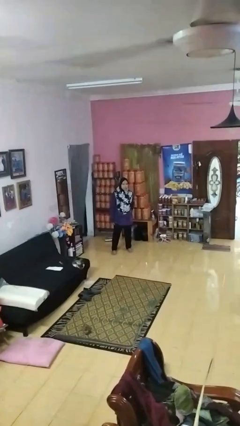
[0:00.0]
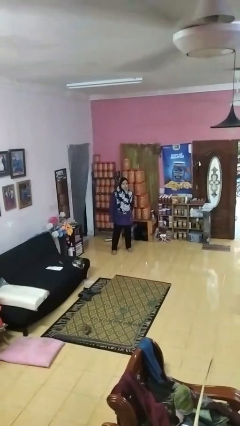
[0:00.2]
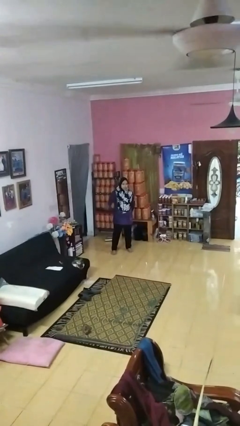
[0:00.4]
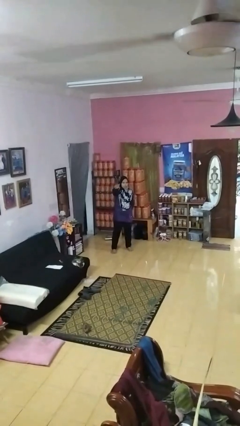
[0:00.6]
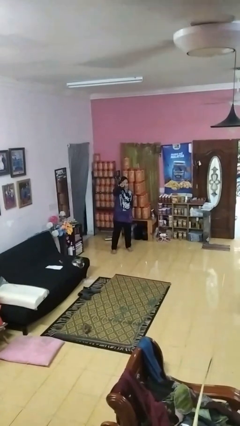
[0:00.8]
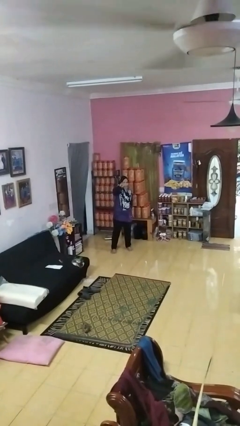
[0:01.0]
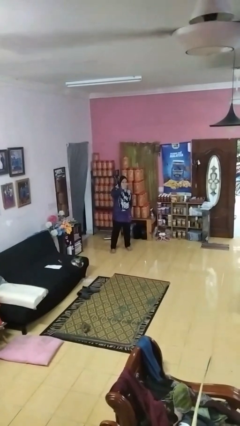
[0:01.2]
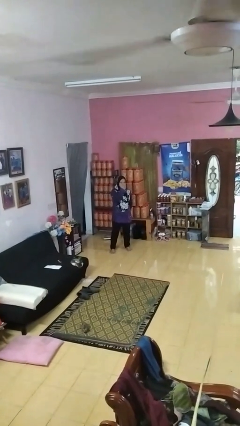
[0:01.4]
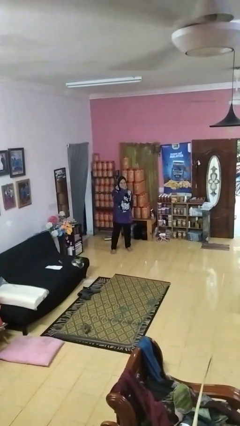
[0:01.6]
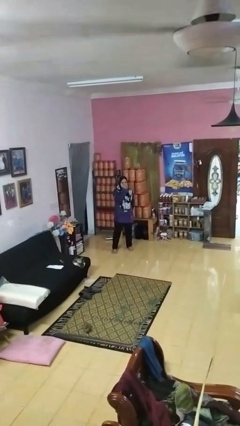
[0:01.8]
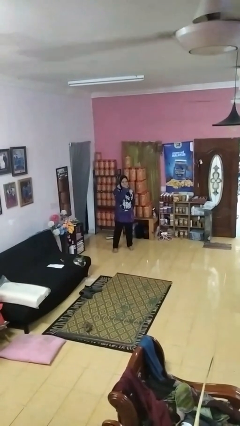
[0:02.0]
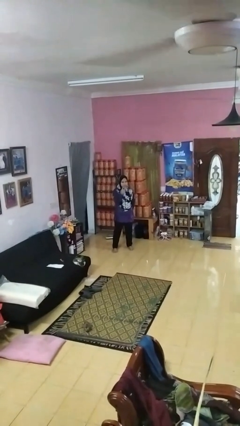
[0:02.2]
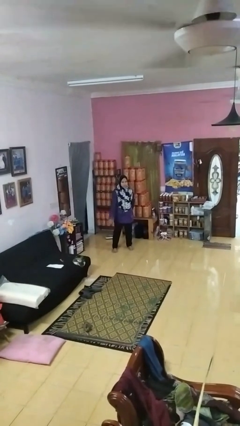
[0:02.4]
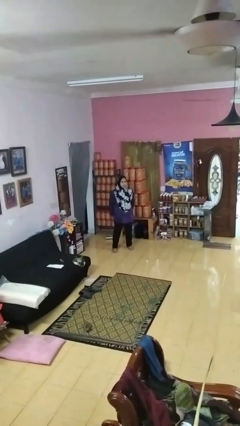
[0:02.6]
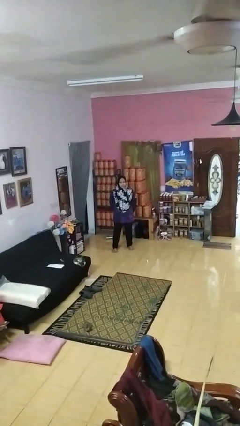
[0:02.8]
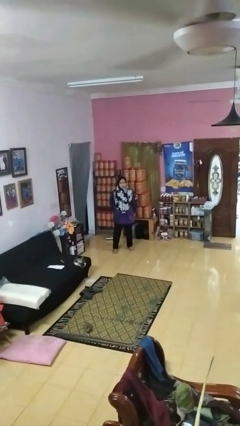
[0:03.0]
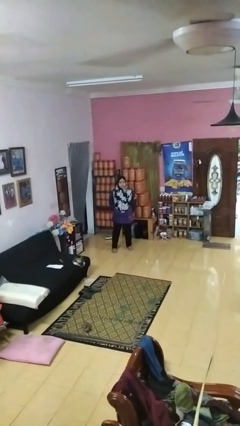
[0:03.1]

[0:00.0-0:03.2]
person gestures watch closely

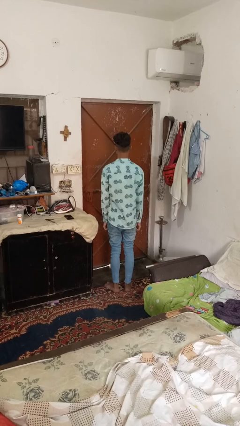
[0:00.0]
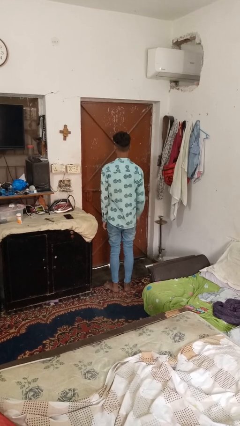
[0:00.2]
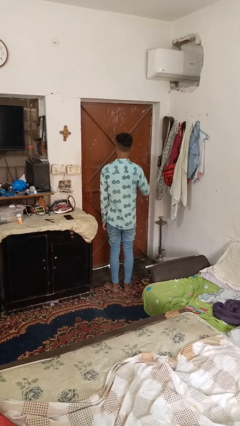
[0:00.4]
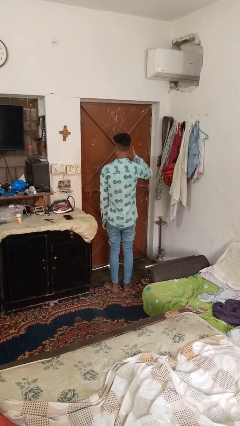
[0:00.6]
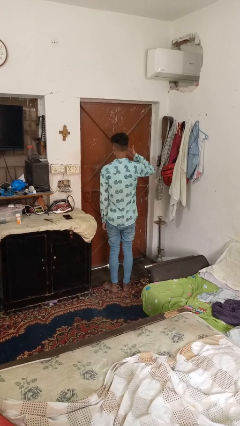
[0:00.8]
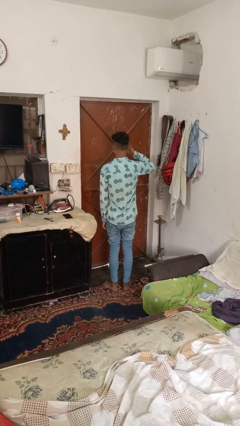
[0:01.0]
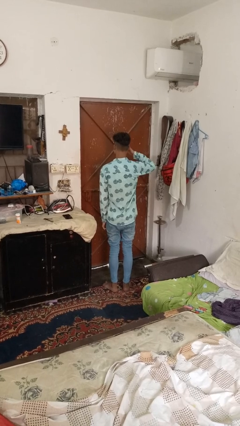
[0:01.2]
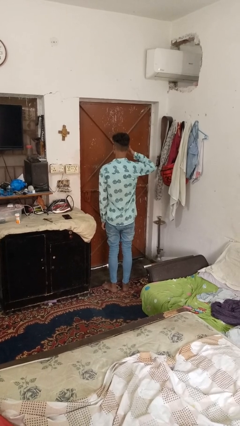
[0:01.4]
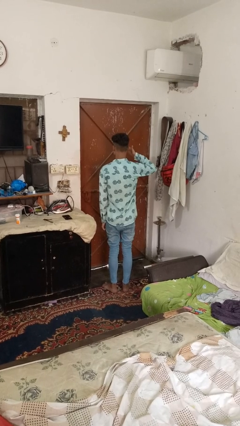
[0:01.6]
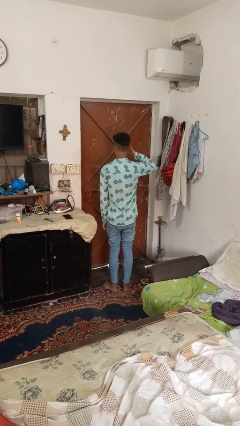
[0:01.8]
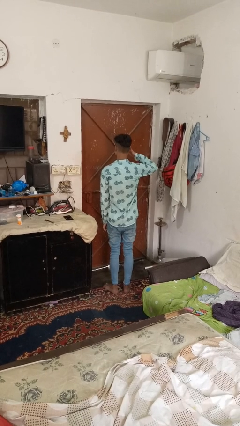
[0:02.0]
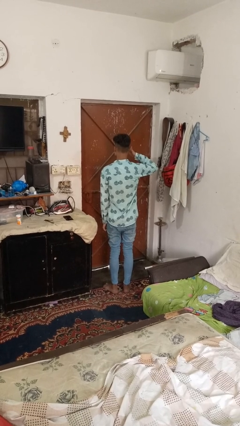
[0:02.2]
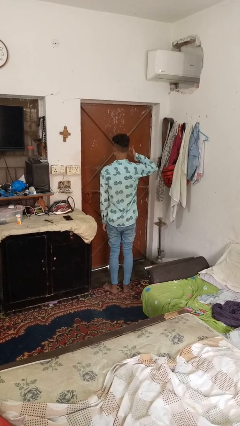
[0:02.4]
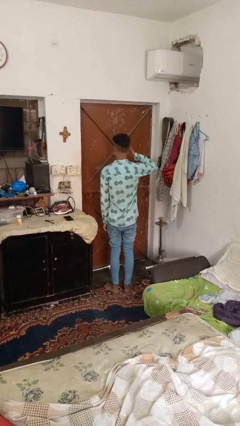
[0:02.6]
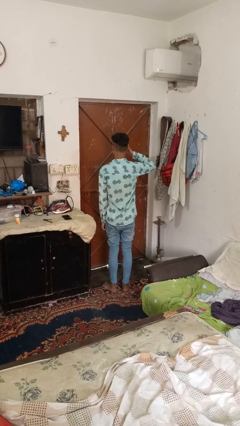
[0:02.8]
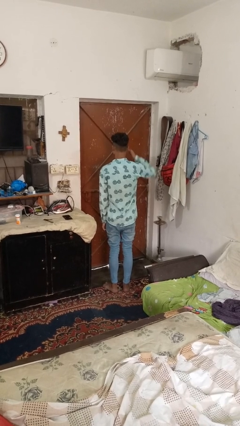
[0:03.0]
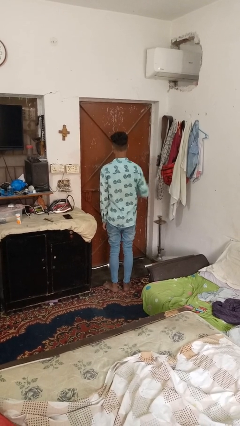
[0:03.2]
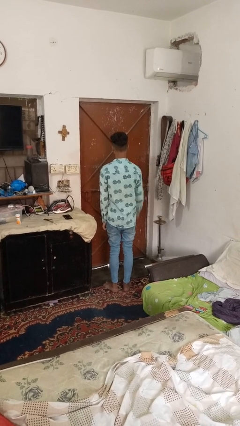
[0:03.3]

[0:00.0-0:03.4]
person rubs eyes

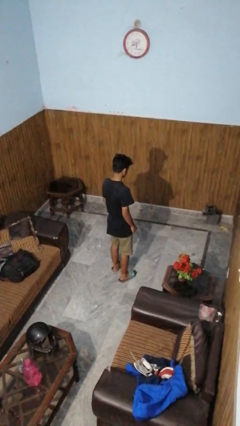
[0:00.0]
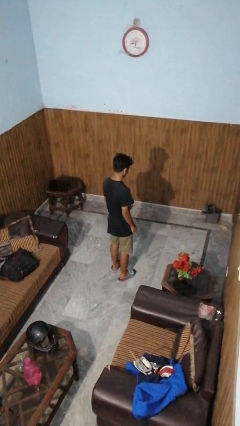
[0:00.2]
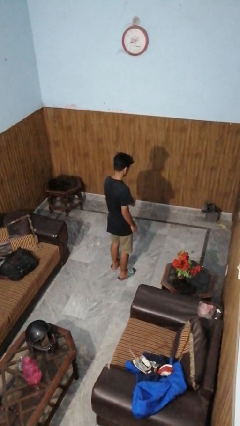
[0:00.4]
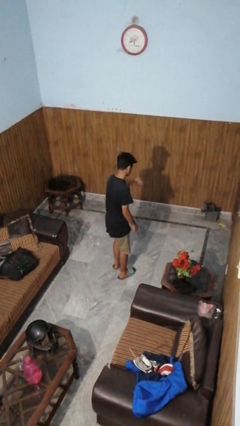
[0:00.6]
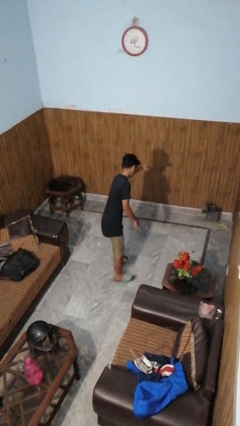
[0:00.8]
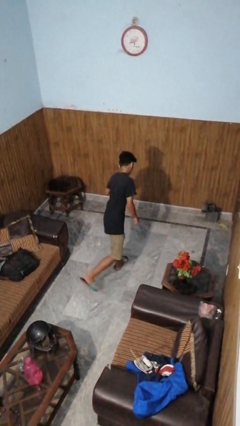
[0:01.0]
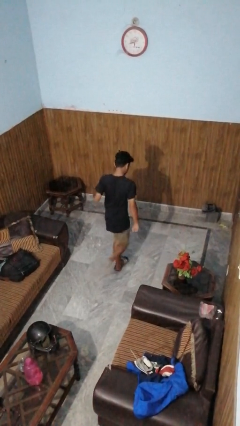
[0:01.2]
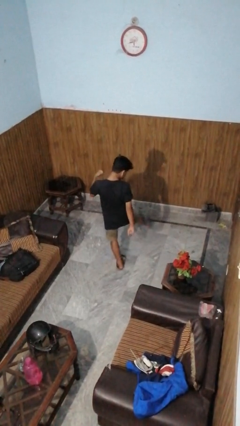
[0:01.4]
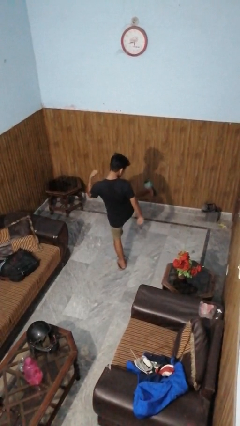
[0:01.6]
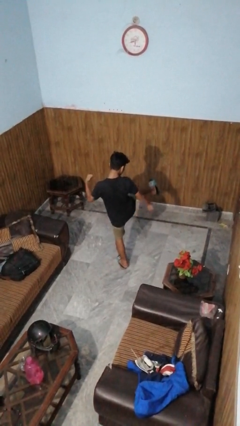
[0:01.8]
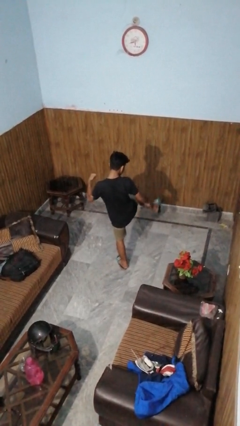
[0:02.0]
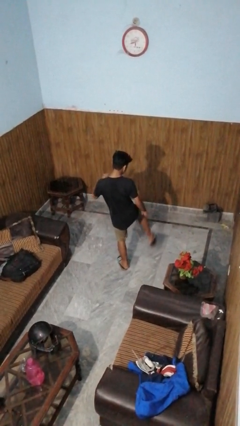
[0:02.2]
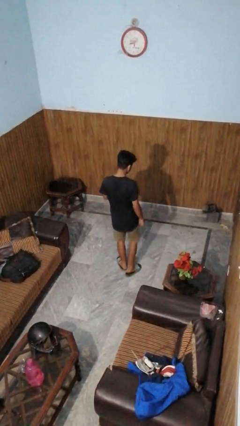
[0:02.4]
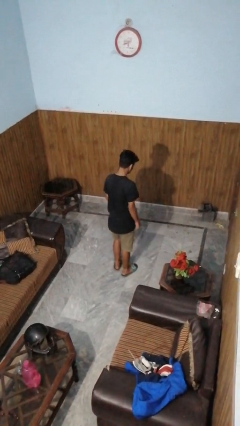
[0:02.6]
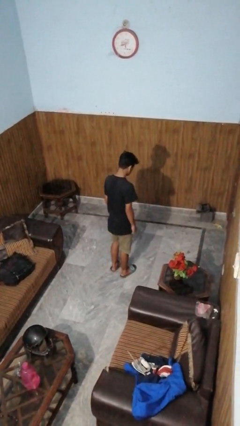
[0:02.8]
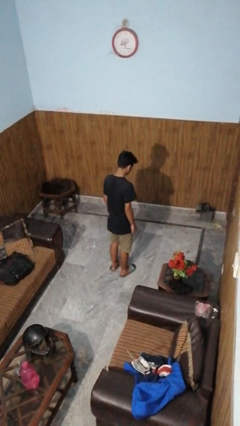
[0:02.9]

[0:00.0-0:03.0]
person karate kicks

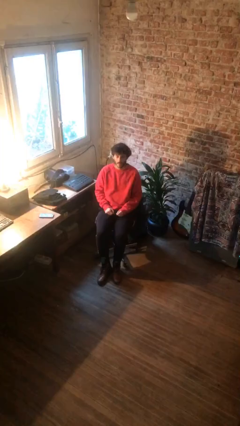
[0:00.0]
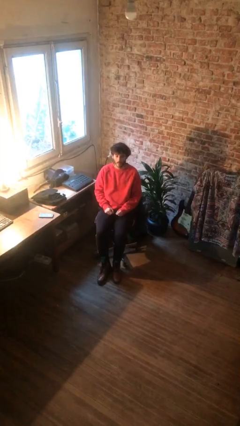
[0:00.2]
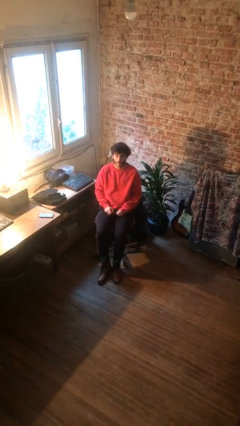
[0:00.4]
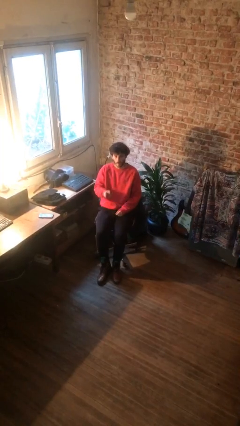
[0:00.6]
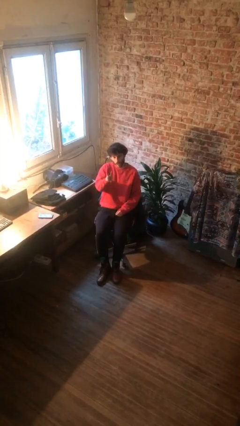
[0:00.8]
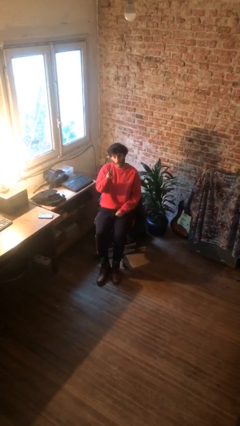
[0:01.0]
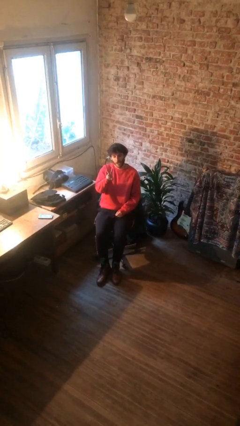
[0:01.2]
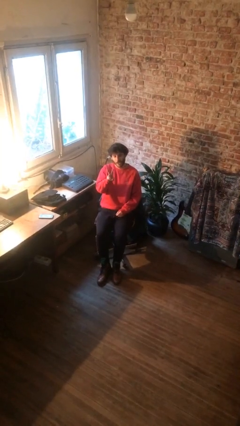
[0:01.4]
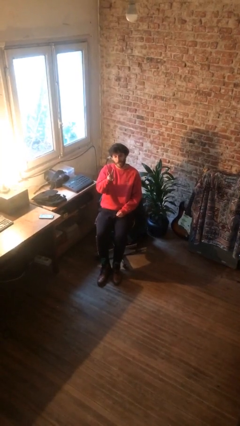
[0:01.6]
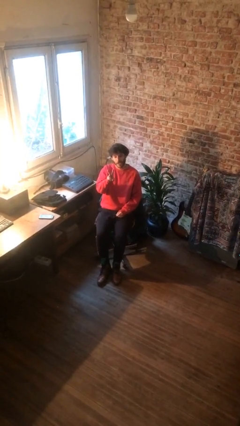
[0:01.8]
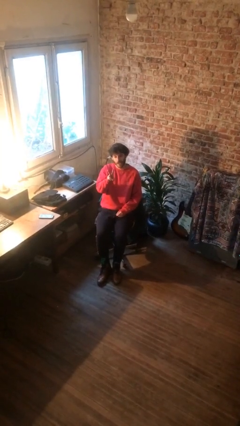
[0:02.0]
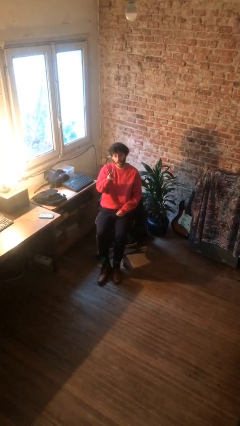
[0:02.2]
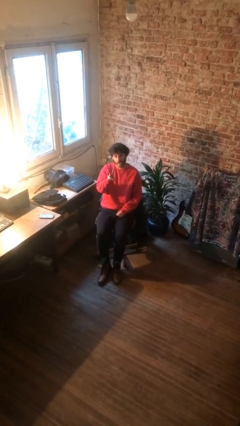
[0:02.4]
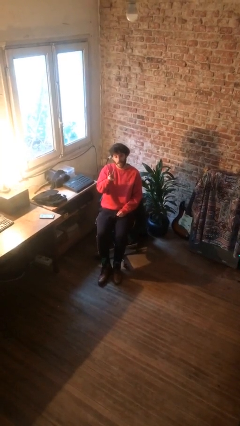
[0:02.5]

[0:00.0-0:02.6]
person gestures peace

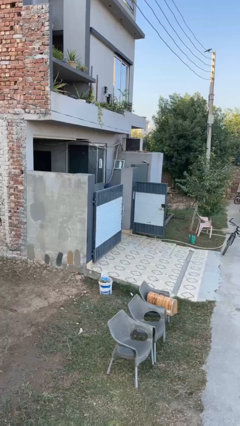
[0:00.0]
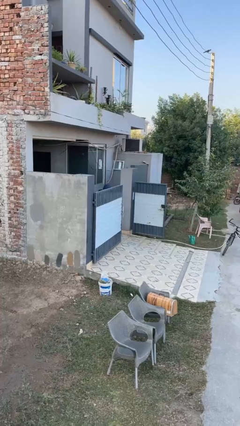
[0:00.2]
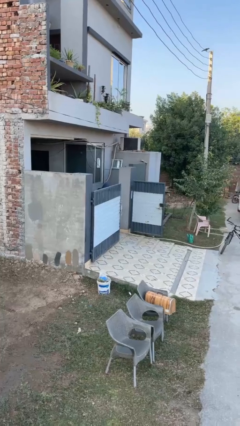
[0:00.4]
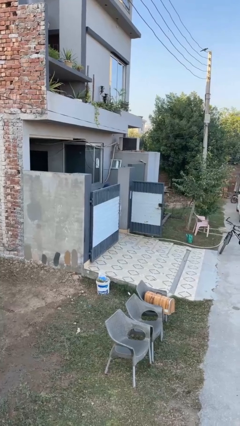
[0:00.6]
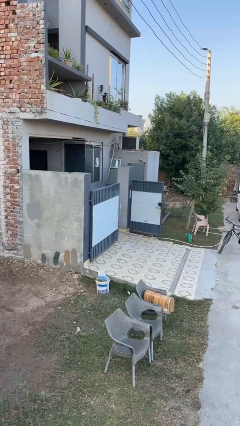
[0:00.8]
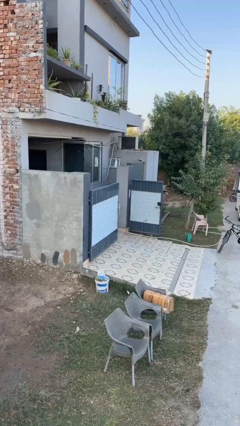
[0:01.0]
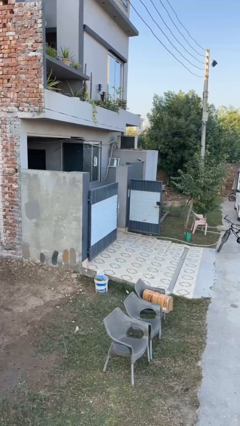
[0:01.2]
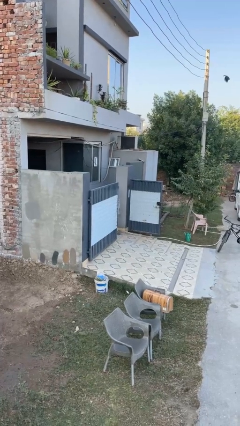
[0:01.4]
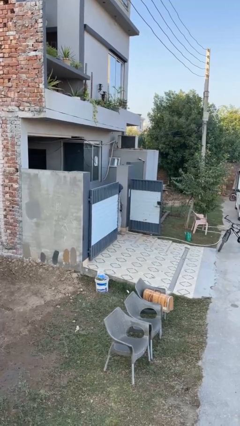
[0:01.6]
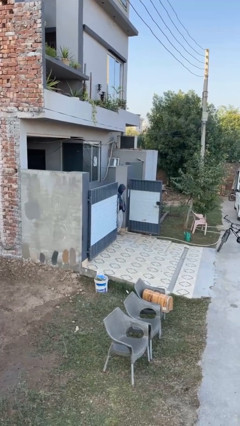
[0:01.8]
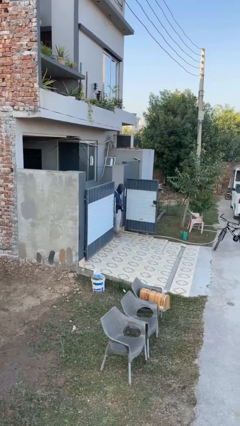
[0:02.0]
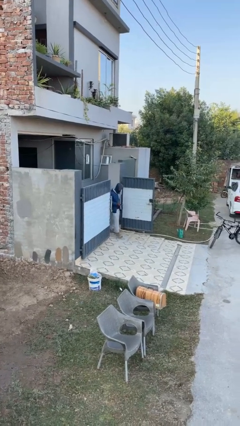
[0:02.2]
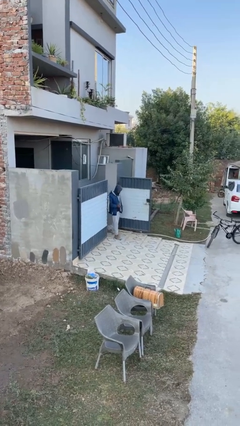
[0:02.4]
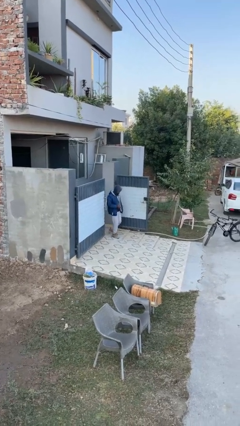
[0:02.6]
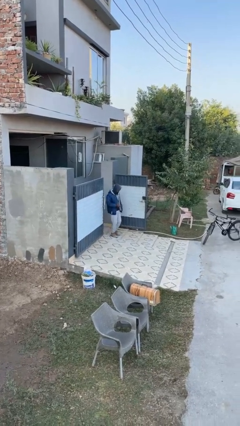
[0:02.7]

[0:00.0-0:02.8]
person enters scene through structure

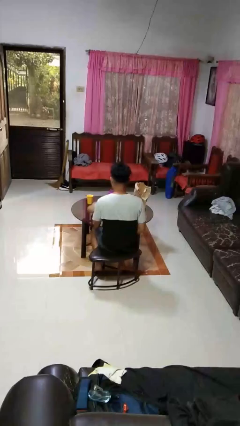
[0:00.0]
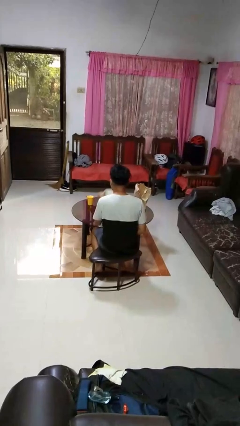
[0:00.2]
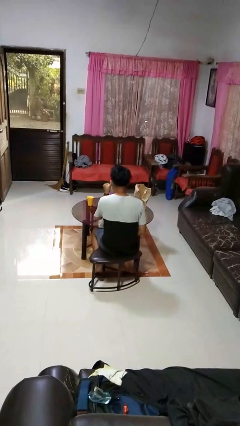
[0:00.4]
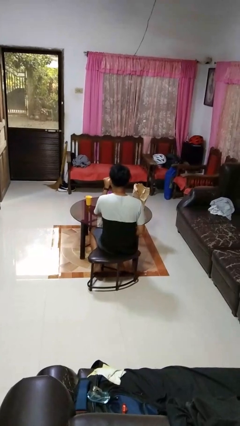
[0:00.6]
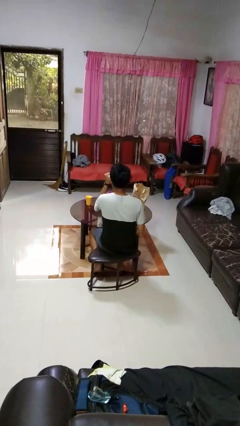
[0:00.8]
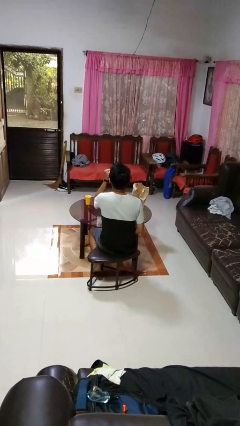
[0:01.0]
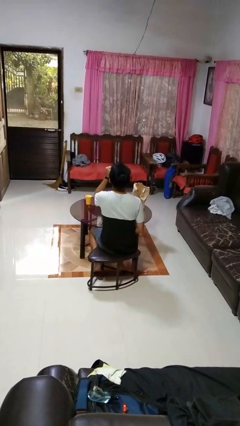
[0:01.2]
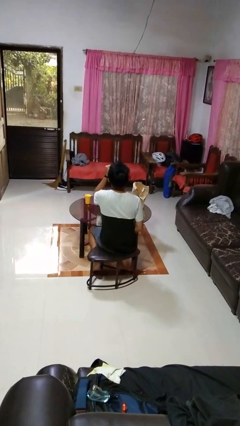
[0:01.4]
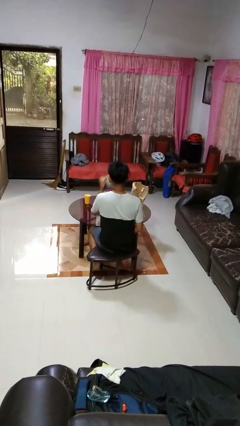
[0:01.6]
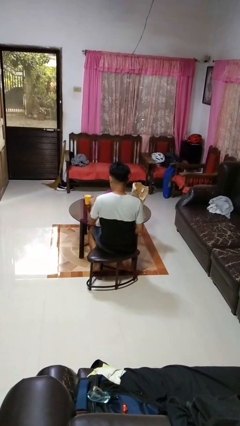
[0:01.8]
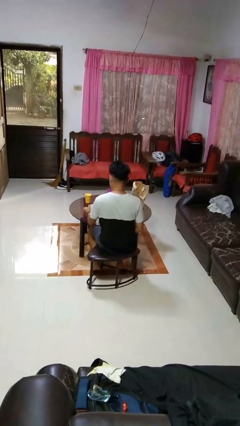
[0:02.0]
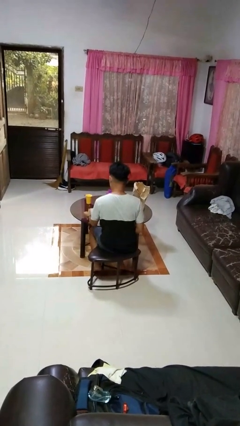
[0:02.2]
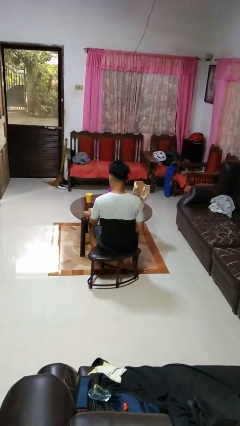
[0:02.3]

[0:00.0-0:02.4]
person drinks from mug
